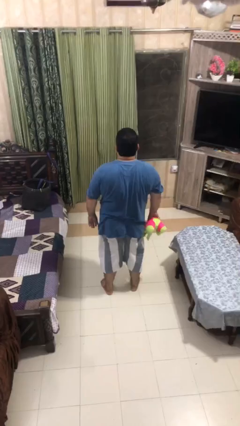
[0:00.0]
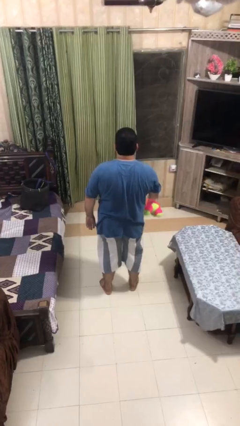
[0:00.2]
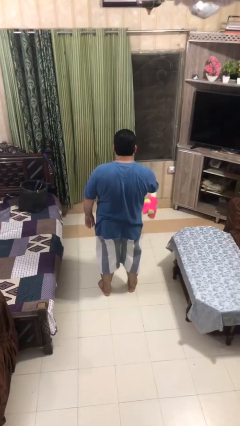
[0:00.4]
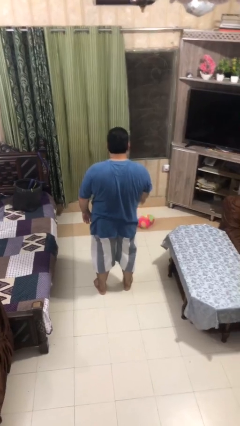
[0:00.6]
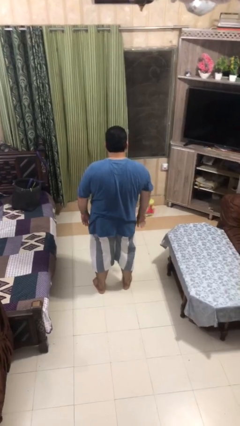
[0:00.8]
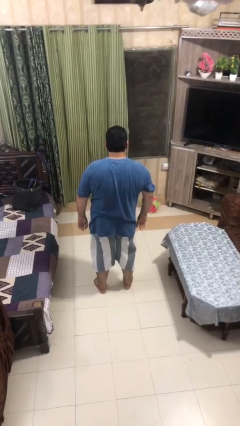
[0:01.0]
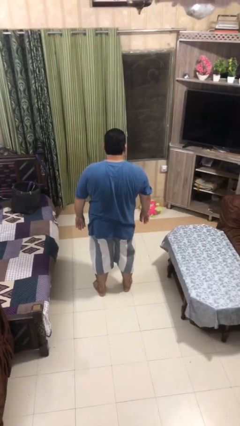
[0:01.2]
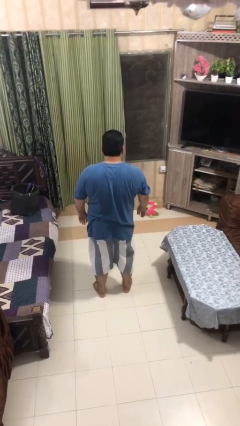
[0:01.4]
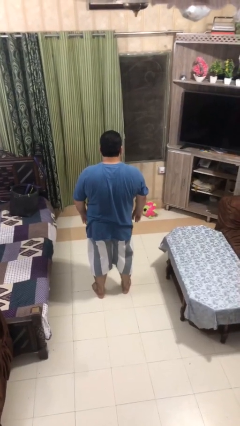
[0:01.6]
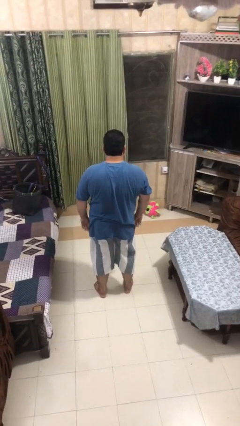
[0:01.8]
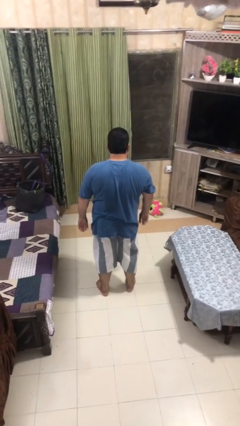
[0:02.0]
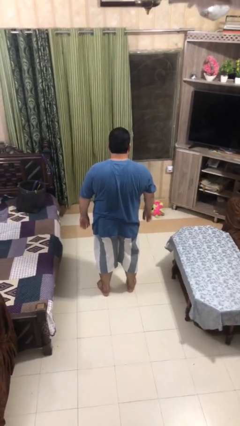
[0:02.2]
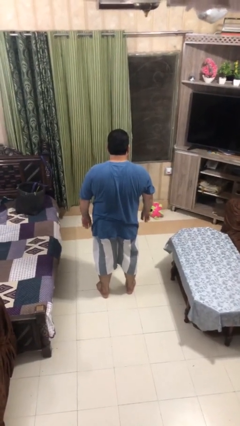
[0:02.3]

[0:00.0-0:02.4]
person throws object to ground

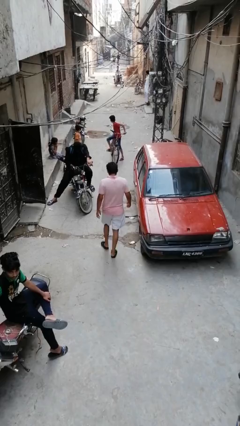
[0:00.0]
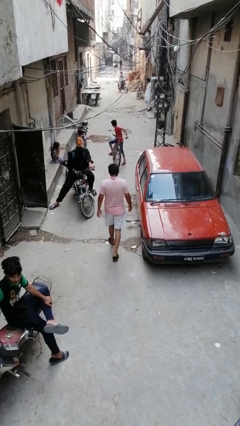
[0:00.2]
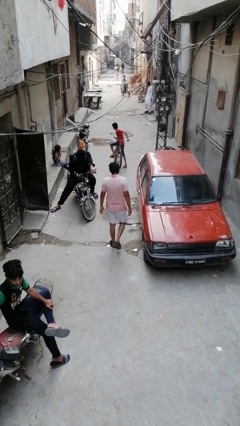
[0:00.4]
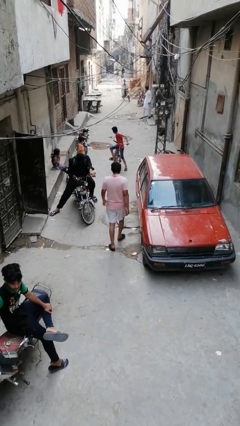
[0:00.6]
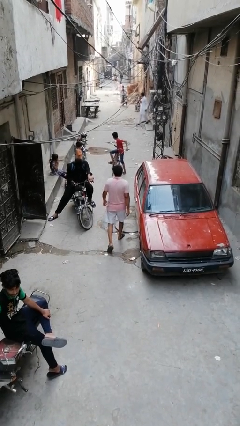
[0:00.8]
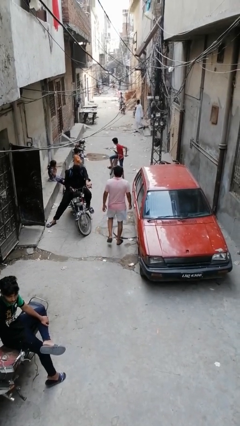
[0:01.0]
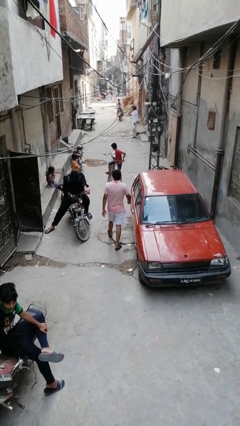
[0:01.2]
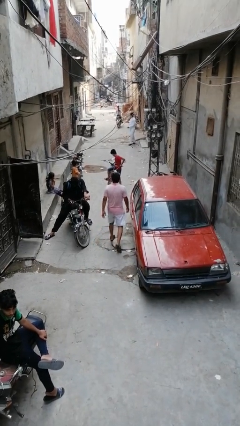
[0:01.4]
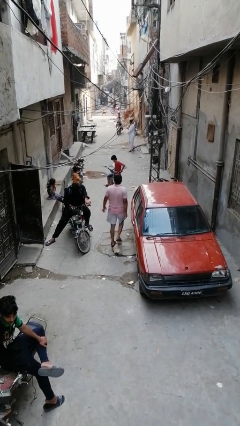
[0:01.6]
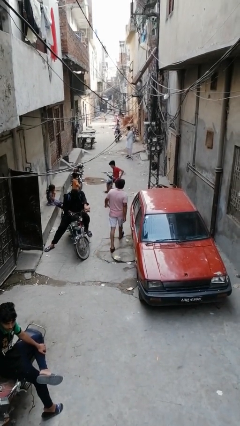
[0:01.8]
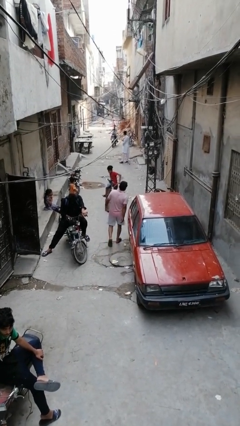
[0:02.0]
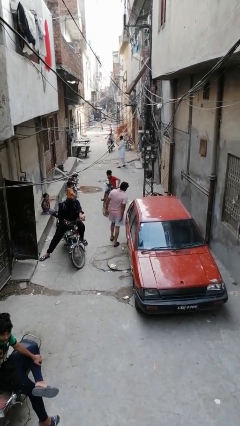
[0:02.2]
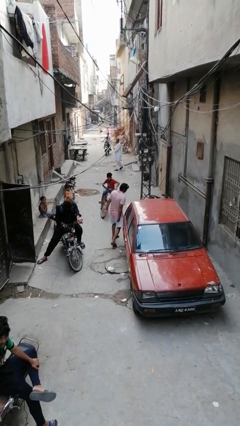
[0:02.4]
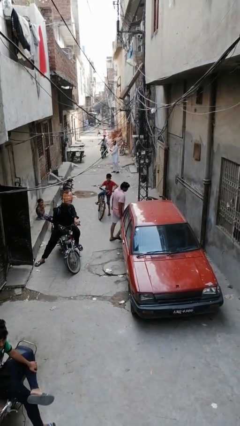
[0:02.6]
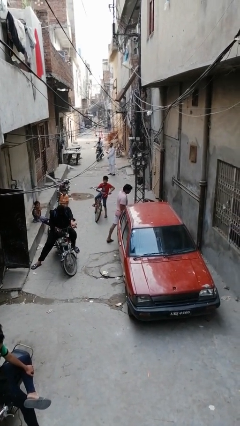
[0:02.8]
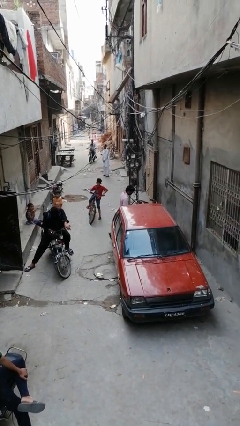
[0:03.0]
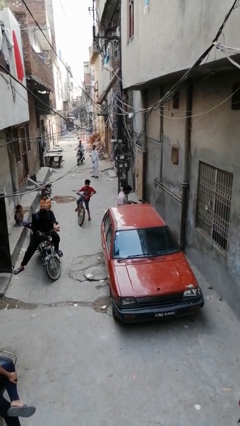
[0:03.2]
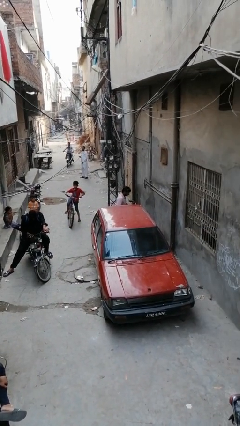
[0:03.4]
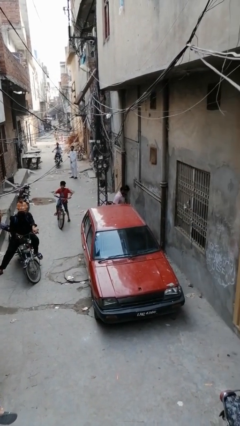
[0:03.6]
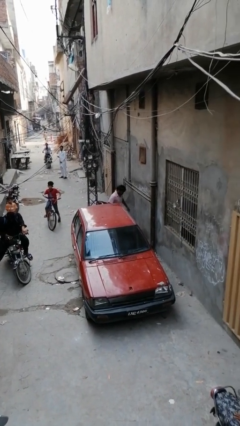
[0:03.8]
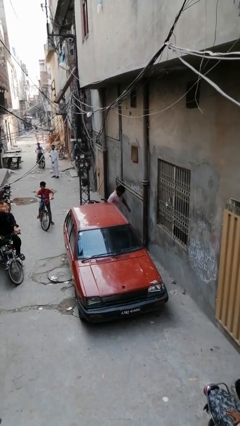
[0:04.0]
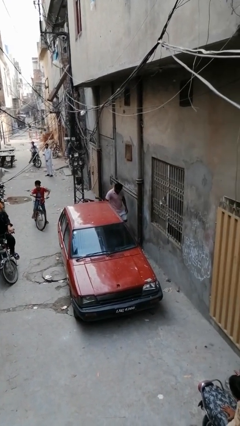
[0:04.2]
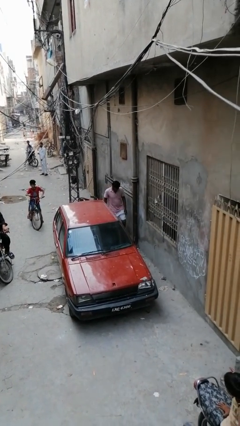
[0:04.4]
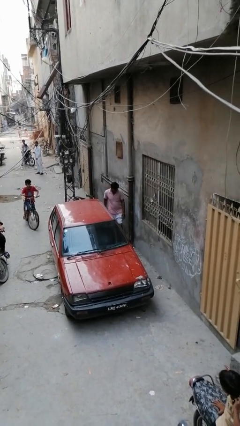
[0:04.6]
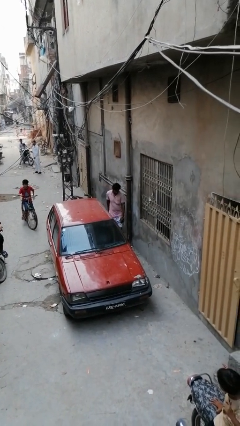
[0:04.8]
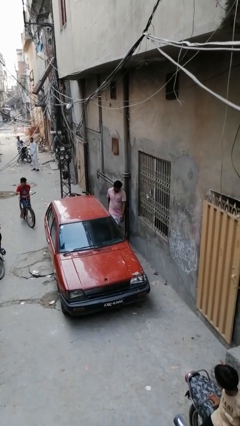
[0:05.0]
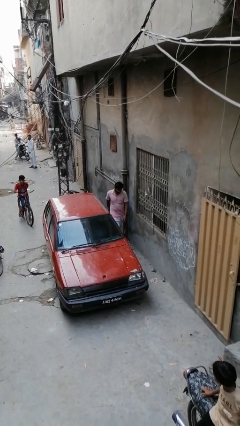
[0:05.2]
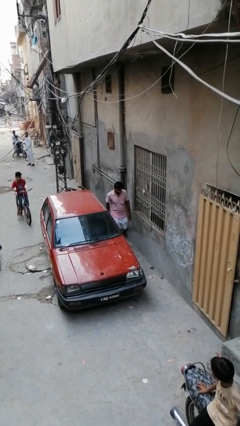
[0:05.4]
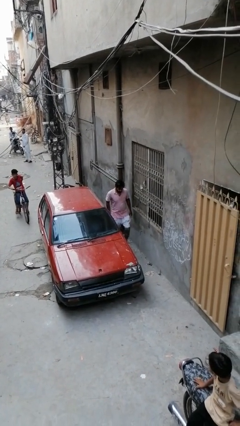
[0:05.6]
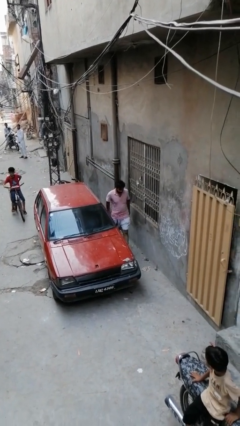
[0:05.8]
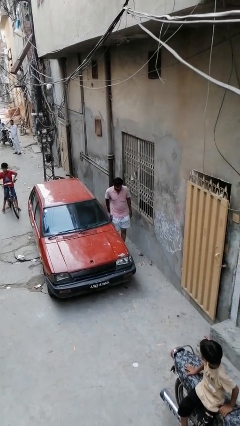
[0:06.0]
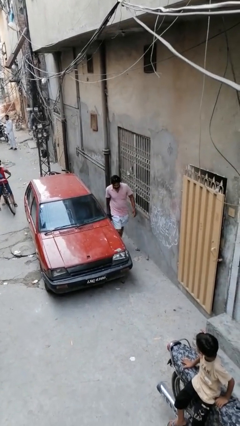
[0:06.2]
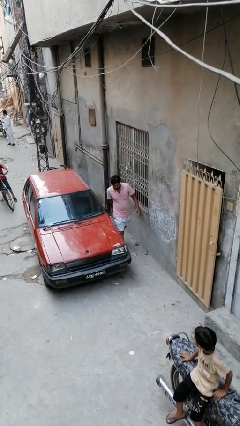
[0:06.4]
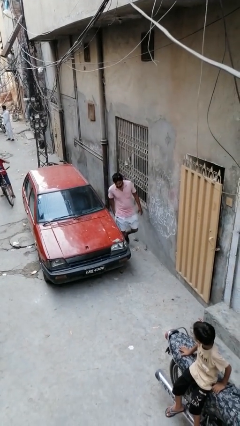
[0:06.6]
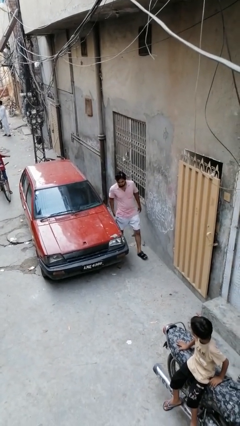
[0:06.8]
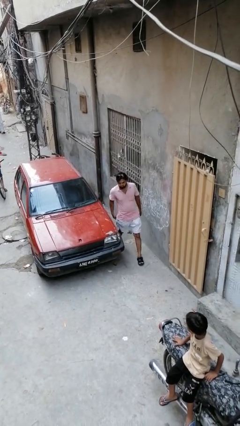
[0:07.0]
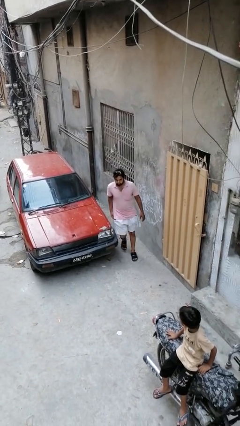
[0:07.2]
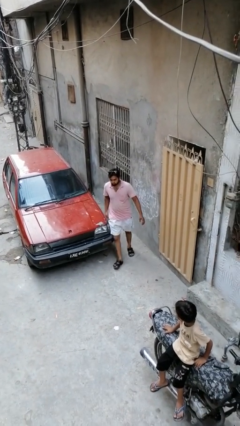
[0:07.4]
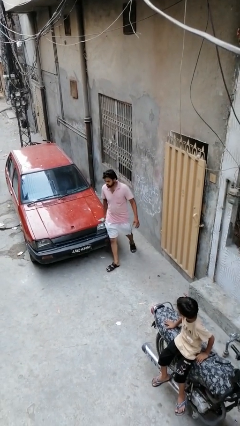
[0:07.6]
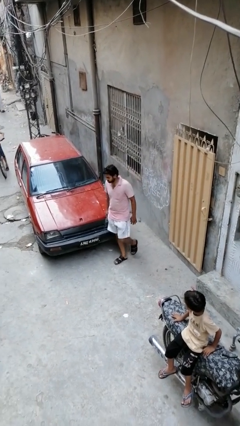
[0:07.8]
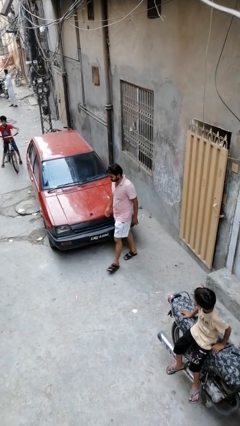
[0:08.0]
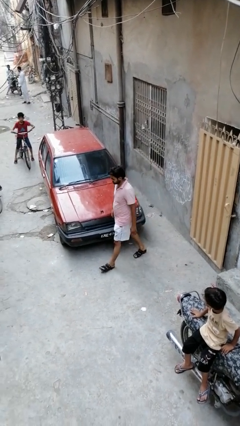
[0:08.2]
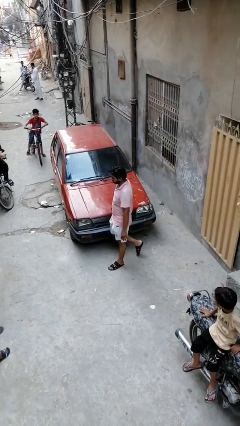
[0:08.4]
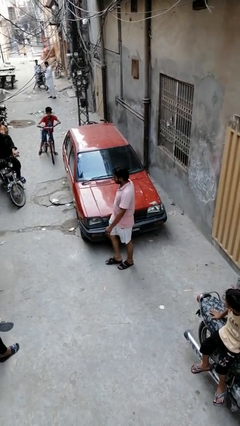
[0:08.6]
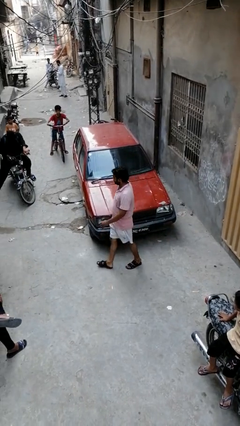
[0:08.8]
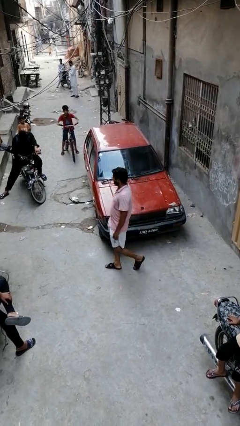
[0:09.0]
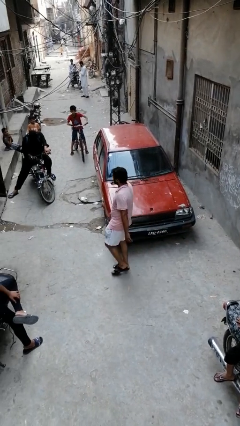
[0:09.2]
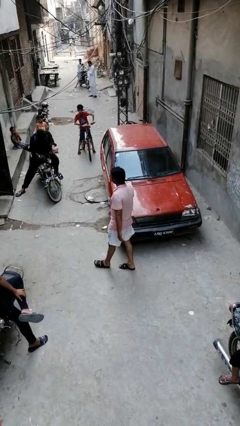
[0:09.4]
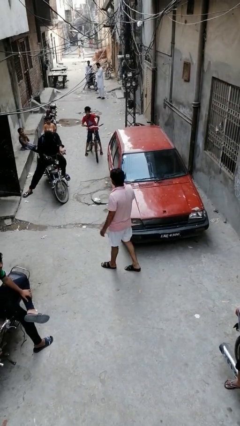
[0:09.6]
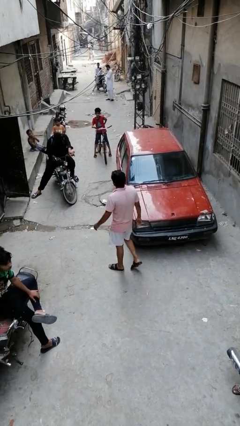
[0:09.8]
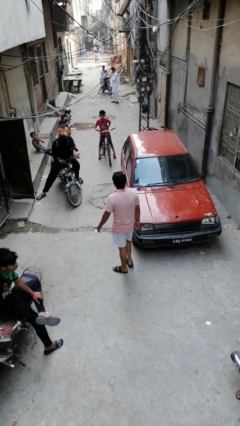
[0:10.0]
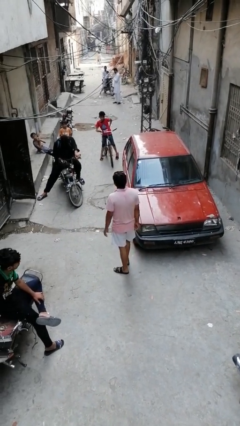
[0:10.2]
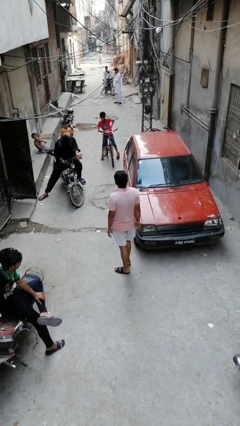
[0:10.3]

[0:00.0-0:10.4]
person walks around car

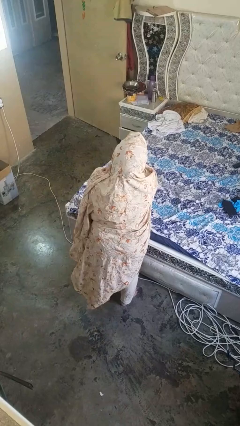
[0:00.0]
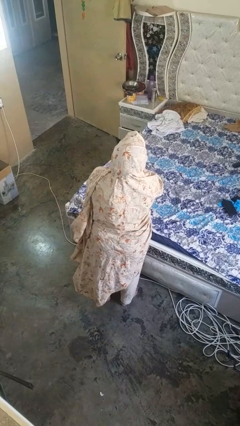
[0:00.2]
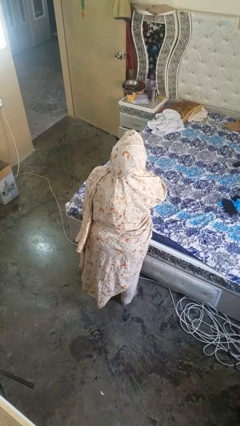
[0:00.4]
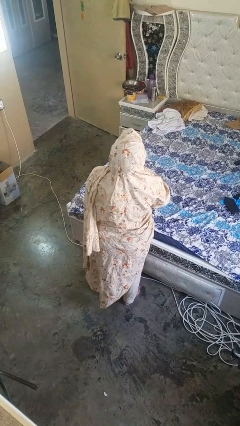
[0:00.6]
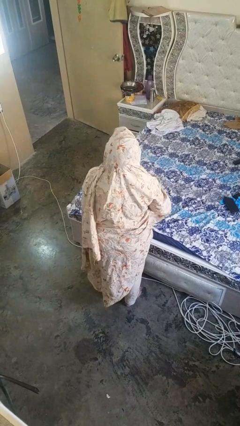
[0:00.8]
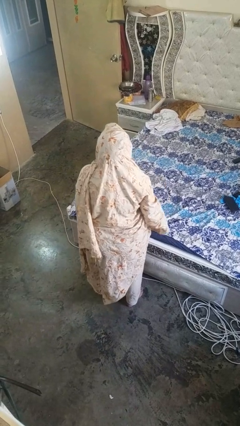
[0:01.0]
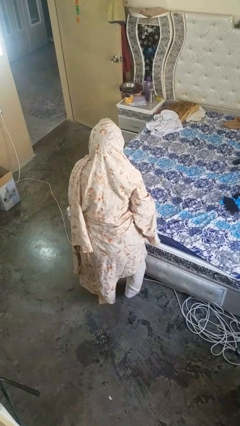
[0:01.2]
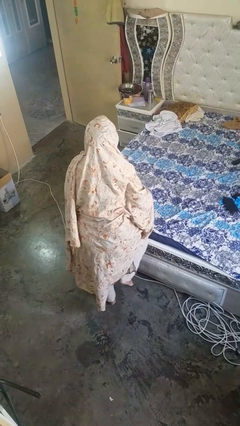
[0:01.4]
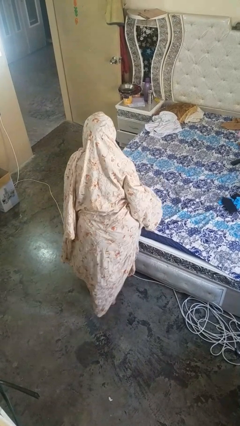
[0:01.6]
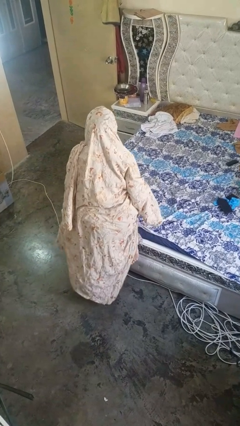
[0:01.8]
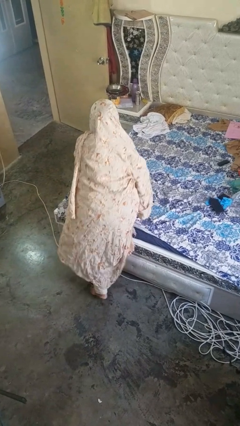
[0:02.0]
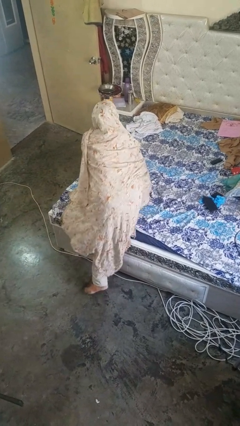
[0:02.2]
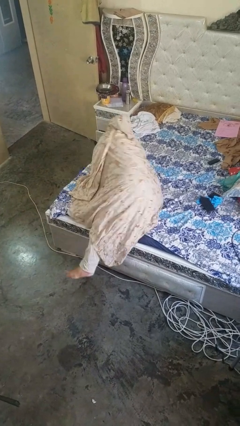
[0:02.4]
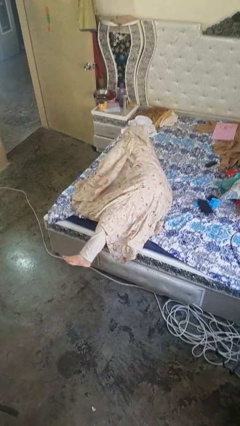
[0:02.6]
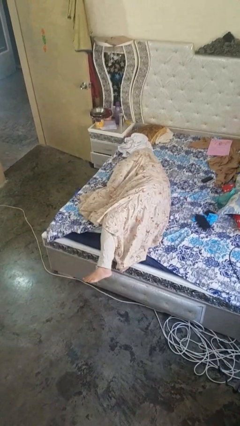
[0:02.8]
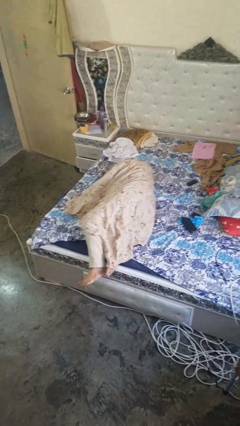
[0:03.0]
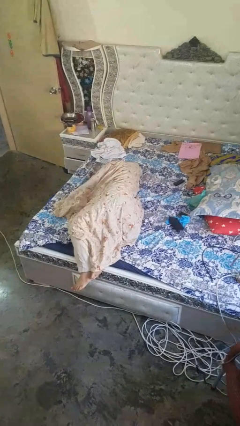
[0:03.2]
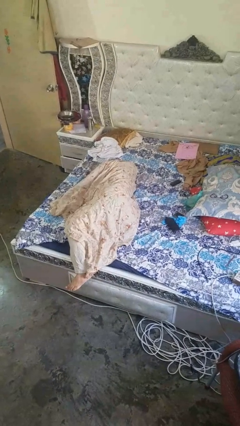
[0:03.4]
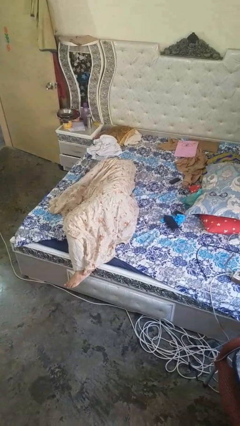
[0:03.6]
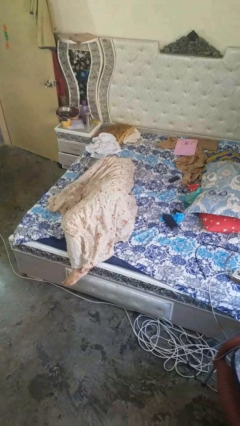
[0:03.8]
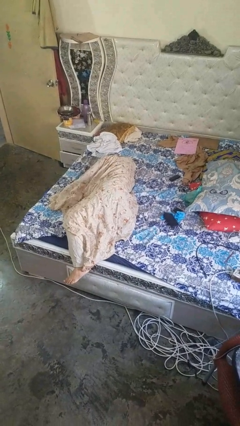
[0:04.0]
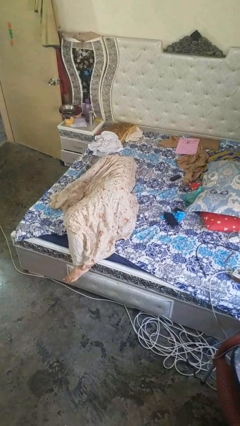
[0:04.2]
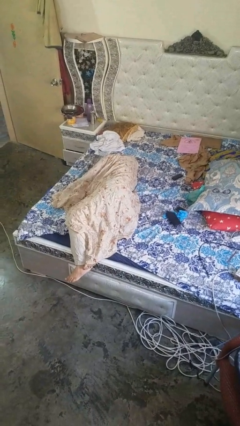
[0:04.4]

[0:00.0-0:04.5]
person lies down on bed

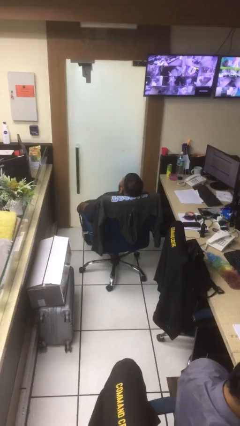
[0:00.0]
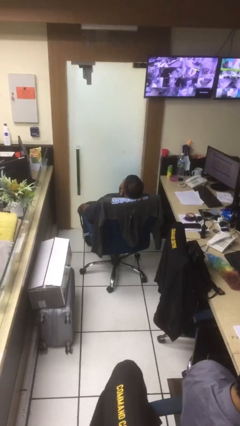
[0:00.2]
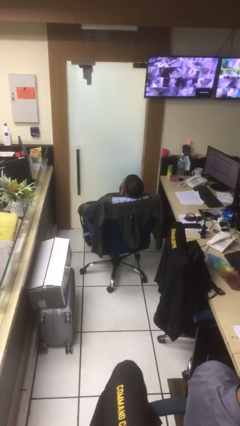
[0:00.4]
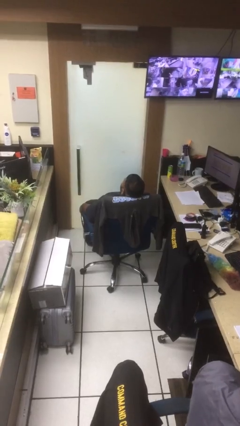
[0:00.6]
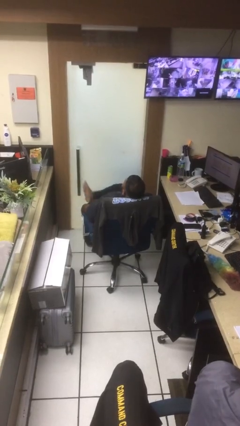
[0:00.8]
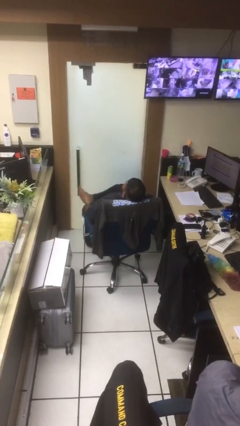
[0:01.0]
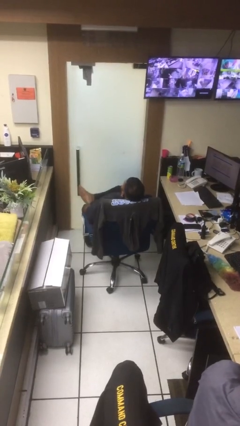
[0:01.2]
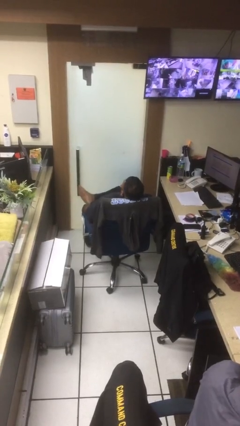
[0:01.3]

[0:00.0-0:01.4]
person crosses legs
